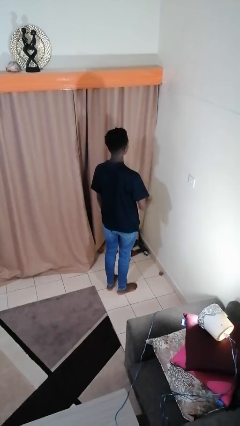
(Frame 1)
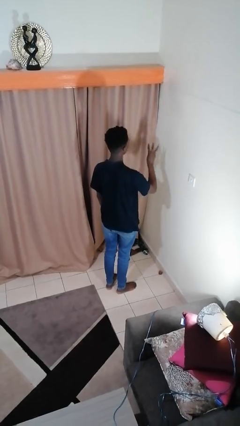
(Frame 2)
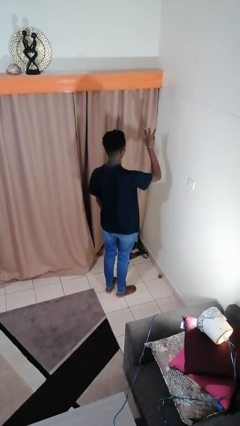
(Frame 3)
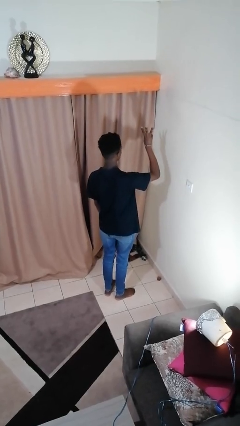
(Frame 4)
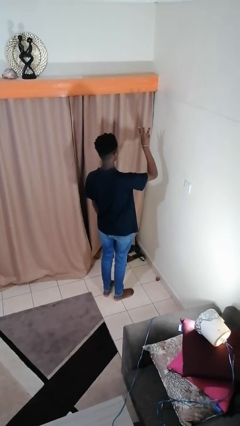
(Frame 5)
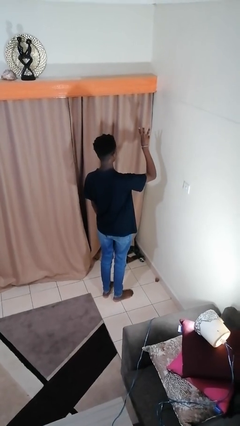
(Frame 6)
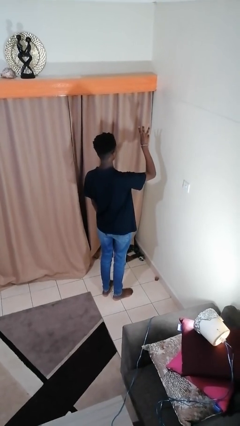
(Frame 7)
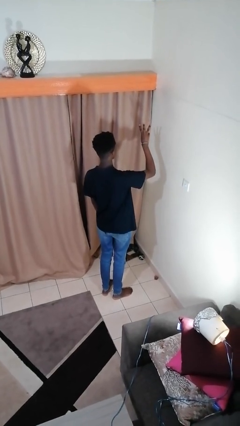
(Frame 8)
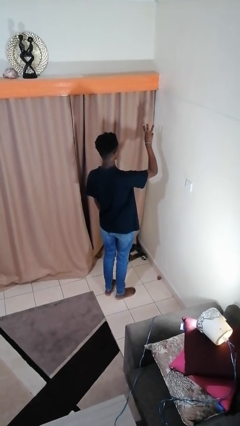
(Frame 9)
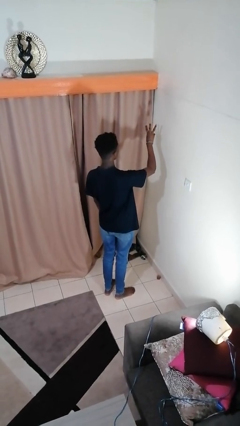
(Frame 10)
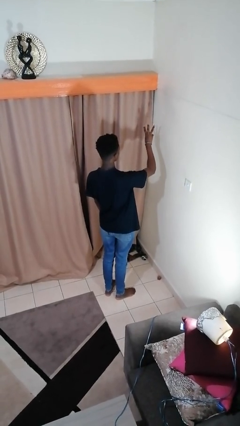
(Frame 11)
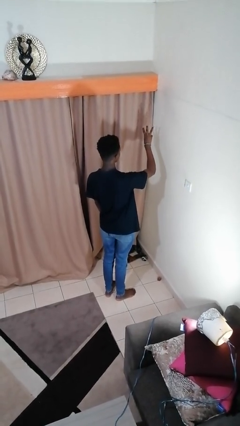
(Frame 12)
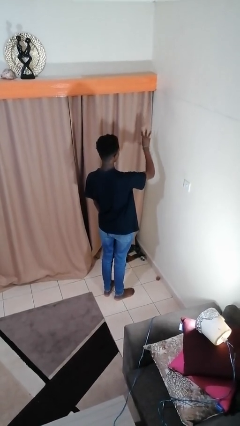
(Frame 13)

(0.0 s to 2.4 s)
person gestures number three

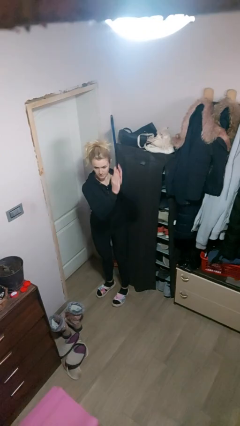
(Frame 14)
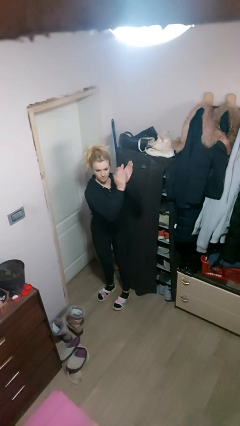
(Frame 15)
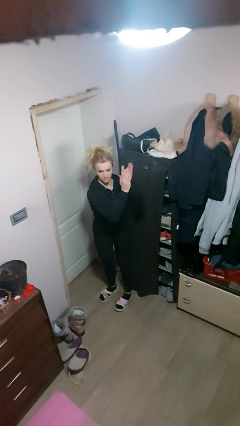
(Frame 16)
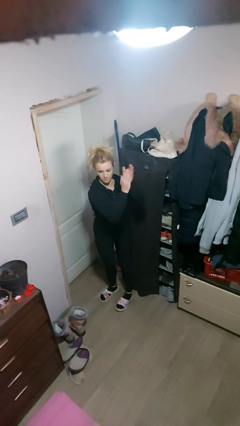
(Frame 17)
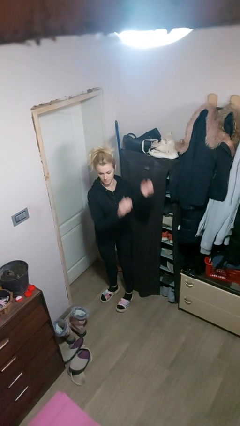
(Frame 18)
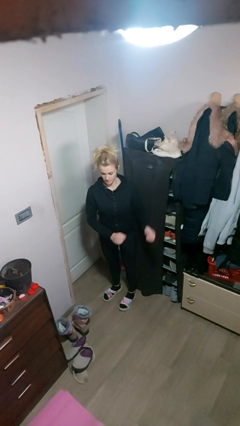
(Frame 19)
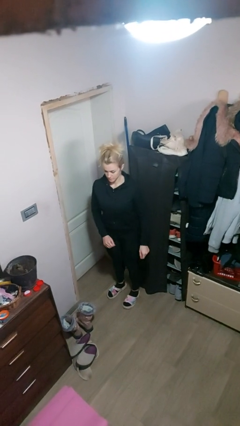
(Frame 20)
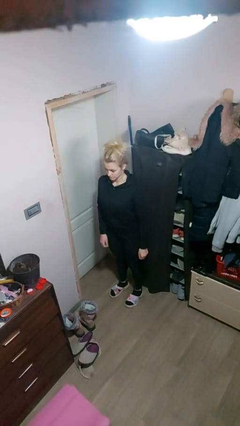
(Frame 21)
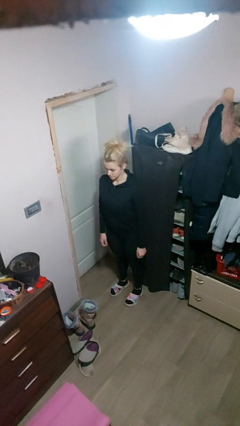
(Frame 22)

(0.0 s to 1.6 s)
person claps hands

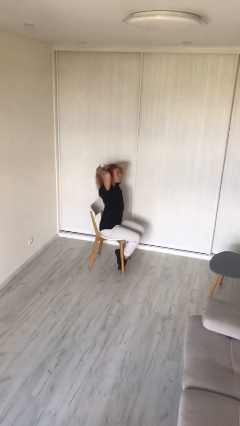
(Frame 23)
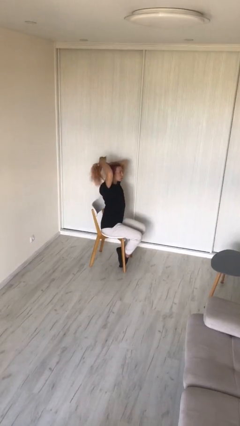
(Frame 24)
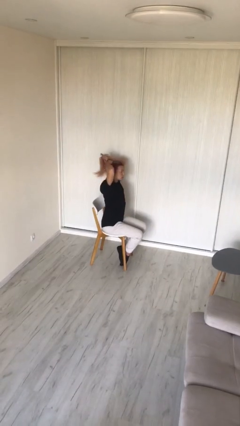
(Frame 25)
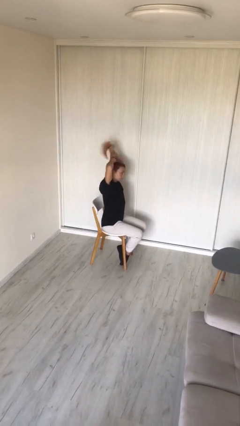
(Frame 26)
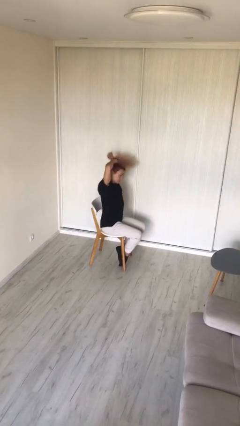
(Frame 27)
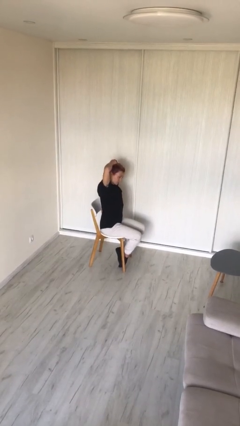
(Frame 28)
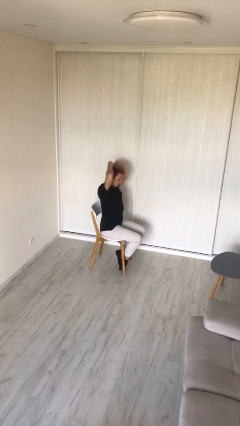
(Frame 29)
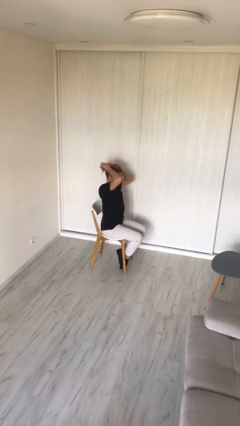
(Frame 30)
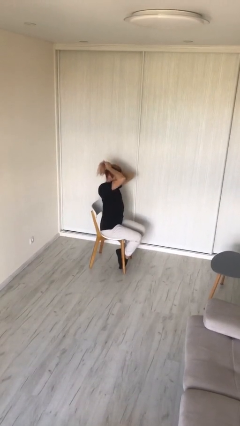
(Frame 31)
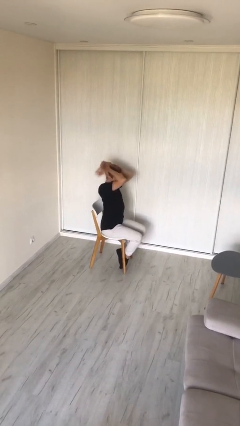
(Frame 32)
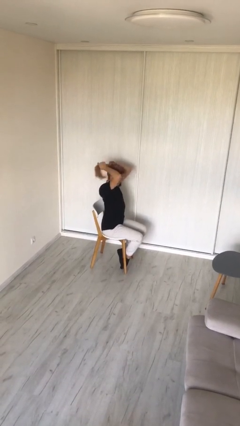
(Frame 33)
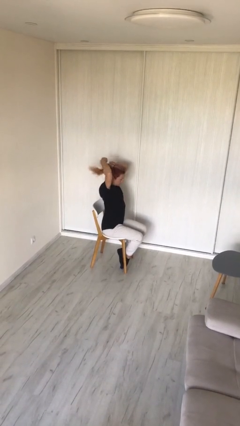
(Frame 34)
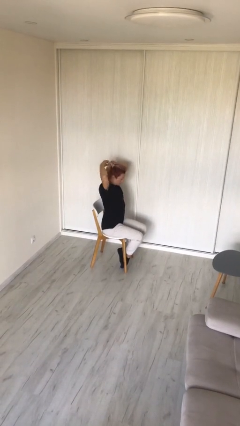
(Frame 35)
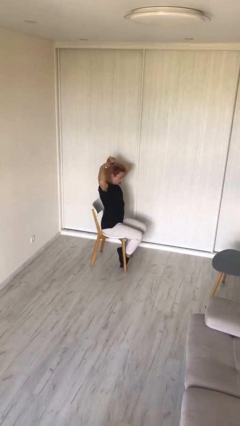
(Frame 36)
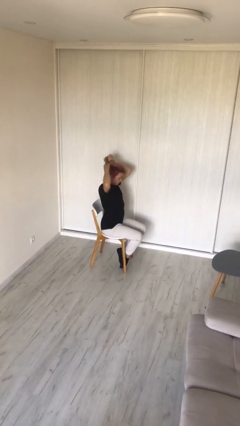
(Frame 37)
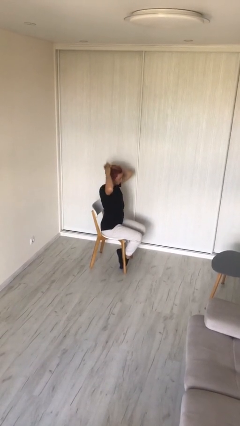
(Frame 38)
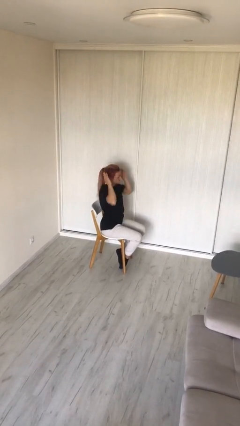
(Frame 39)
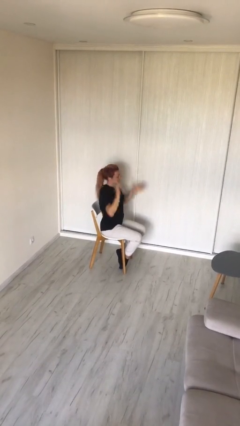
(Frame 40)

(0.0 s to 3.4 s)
person puts hair in ponytail

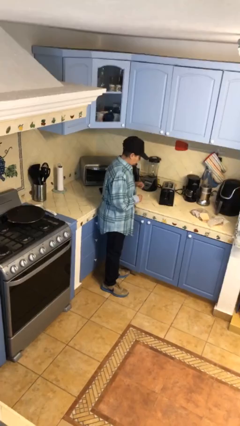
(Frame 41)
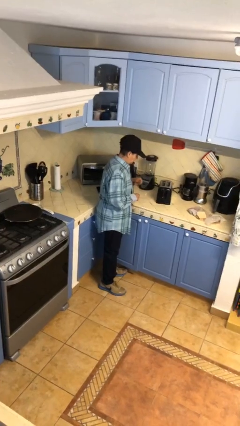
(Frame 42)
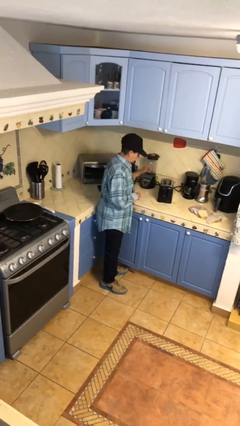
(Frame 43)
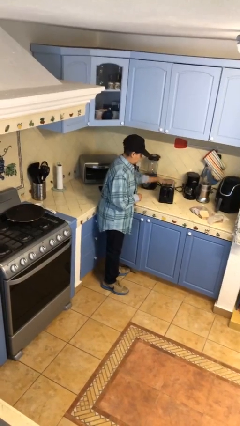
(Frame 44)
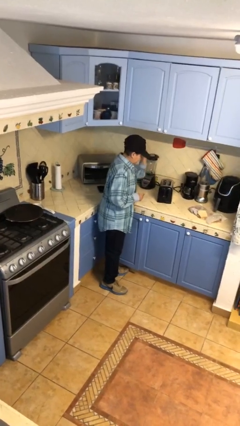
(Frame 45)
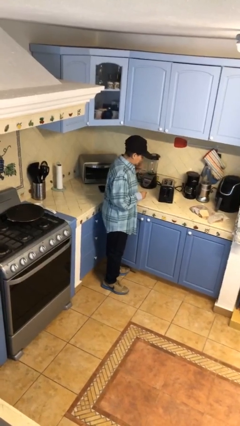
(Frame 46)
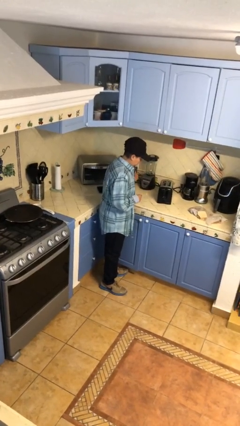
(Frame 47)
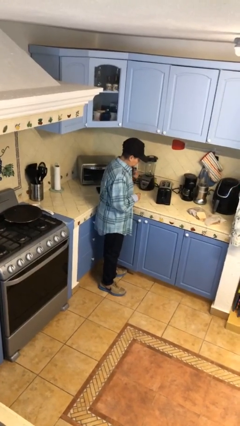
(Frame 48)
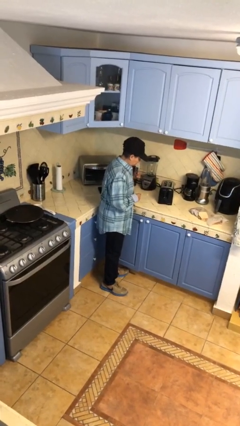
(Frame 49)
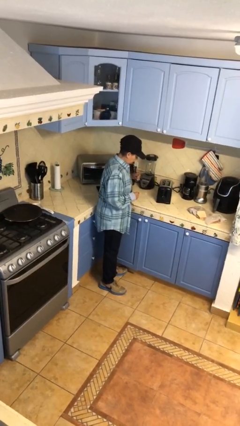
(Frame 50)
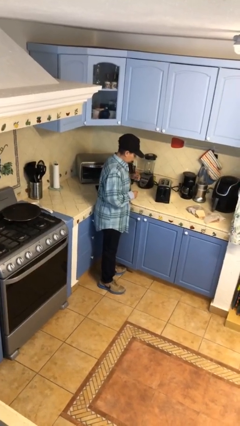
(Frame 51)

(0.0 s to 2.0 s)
person burns hand

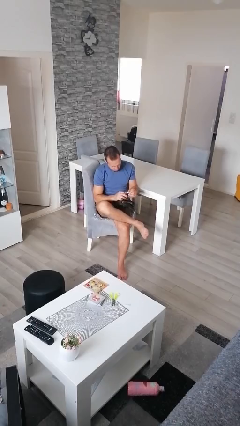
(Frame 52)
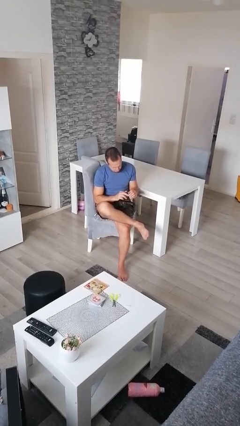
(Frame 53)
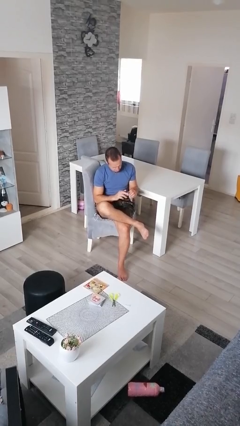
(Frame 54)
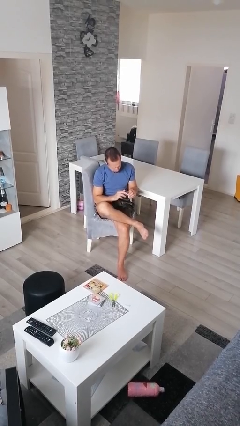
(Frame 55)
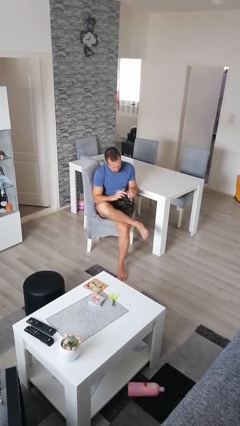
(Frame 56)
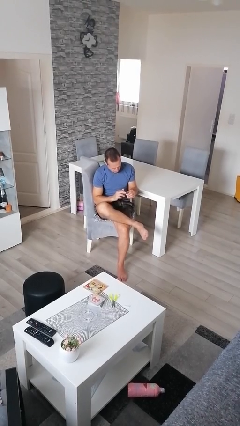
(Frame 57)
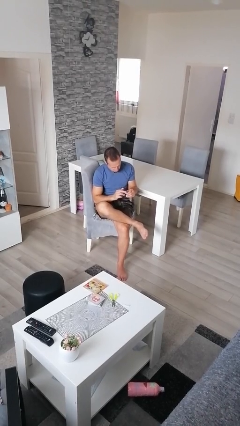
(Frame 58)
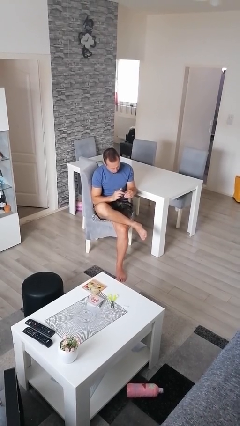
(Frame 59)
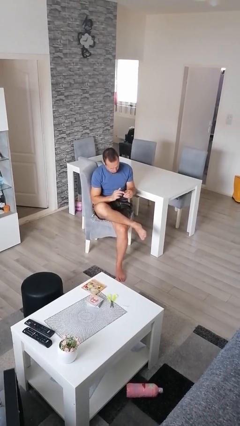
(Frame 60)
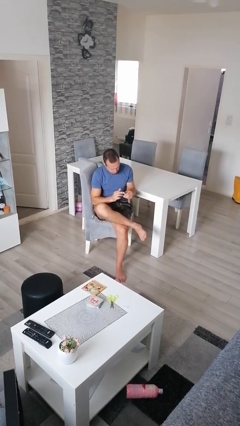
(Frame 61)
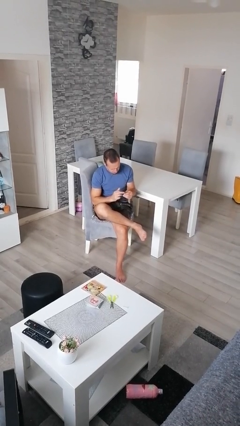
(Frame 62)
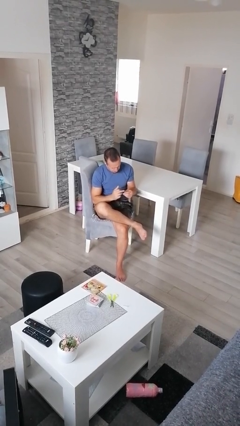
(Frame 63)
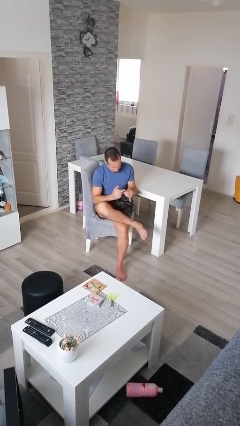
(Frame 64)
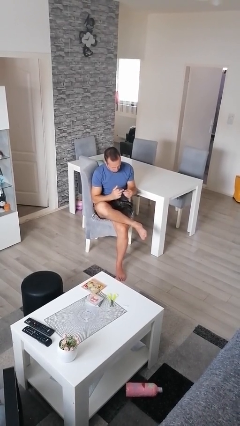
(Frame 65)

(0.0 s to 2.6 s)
person files fingernails

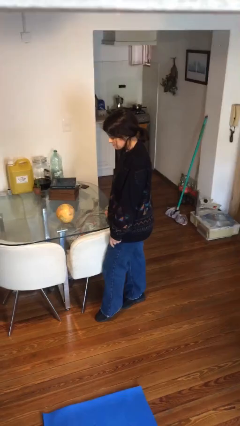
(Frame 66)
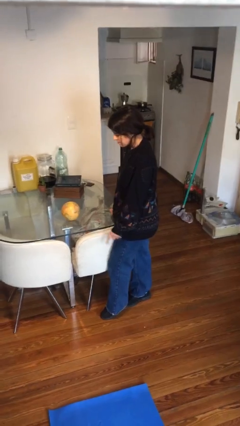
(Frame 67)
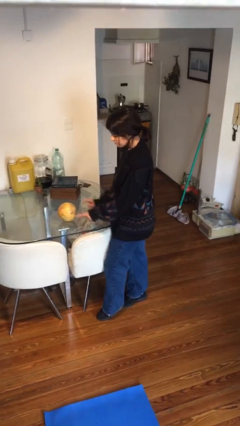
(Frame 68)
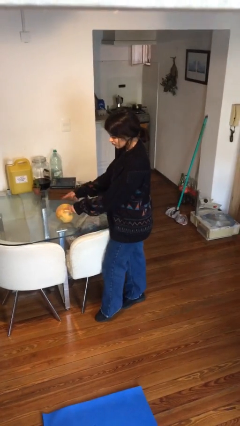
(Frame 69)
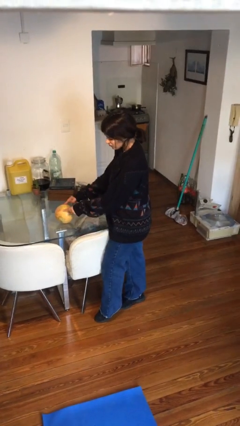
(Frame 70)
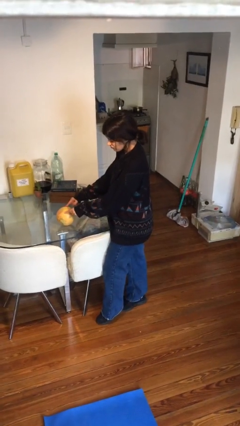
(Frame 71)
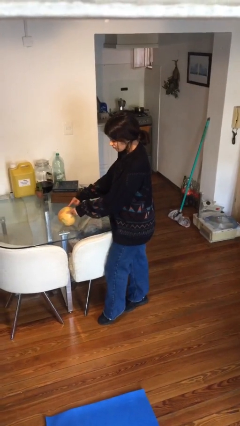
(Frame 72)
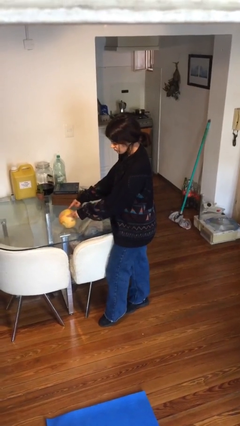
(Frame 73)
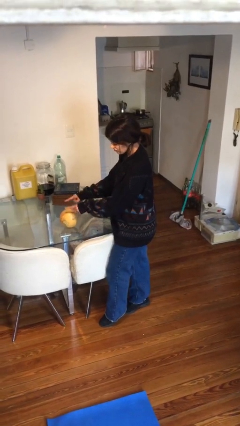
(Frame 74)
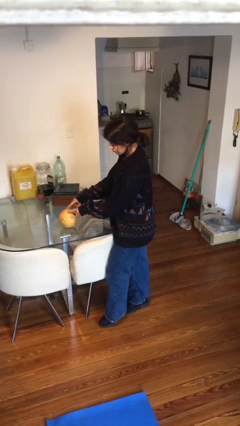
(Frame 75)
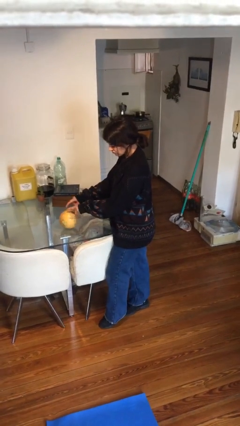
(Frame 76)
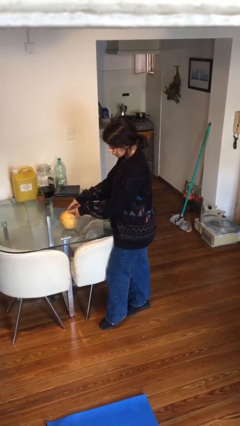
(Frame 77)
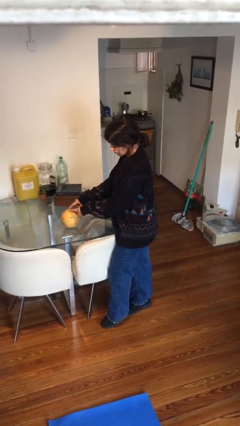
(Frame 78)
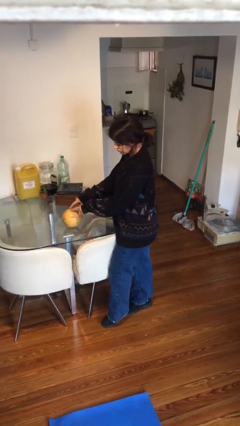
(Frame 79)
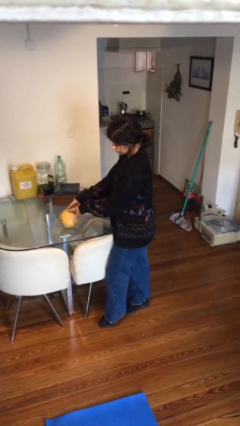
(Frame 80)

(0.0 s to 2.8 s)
person taps object with finger

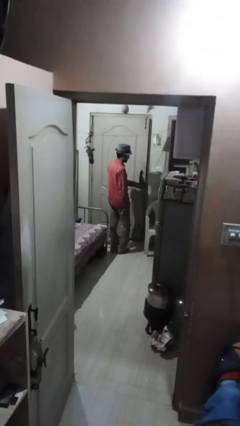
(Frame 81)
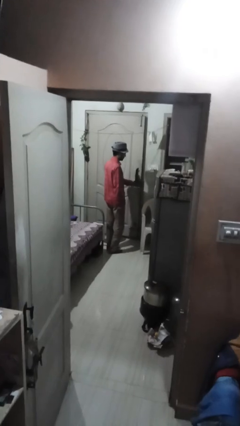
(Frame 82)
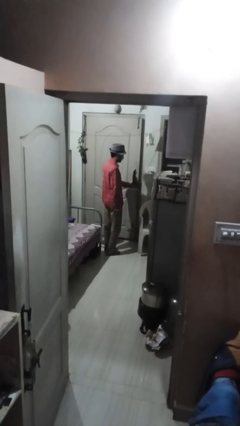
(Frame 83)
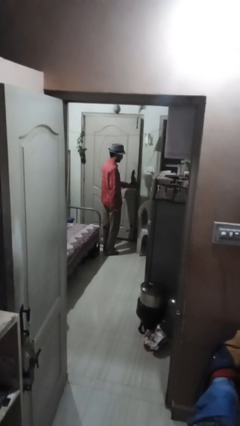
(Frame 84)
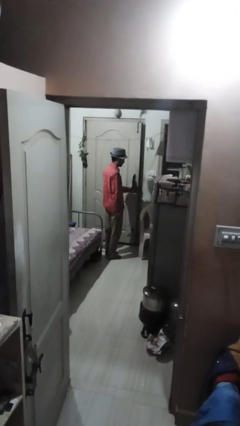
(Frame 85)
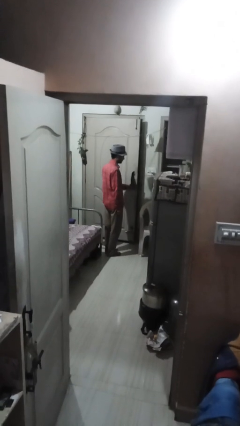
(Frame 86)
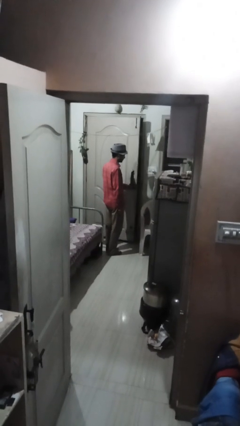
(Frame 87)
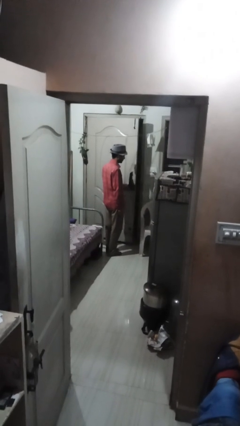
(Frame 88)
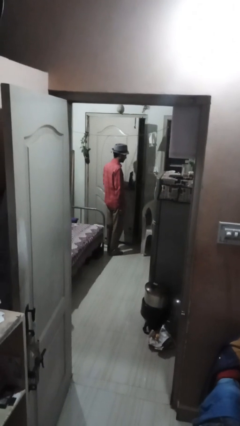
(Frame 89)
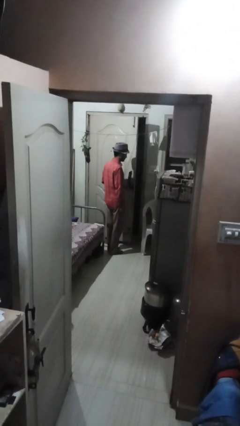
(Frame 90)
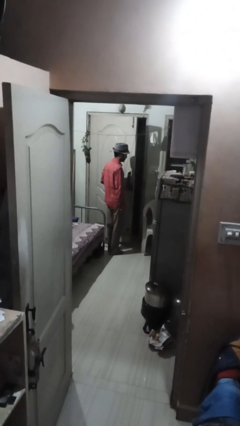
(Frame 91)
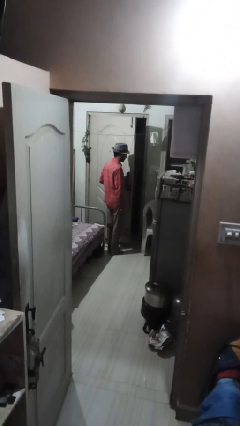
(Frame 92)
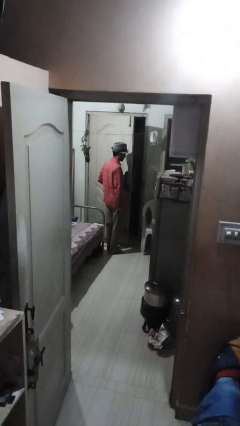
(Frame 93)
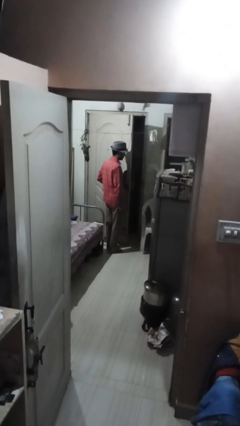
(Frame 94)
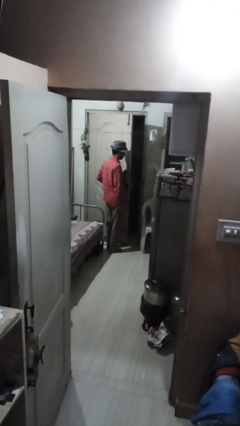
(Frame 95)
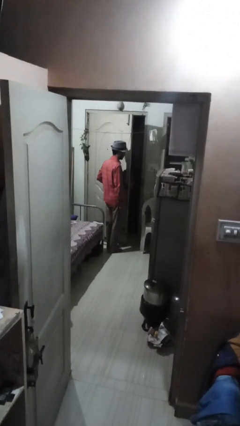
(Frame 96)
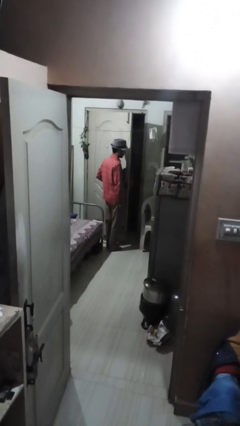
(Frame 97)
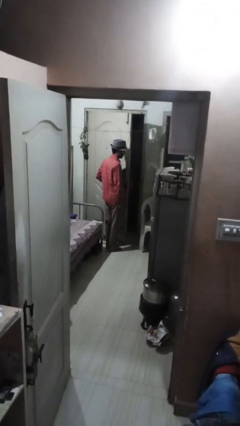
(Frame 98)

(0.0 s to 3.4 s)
person opens facility door
